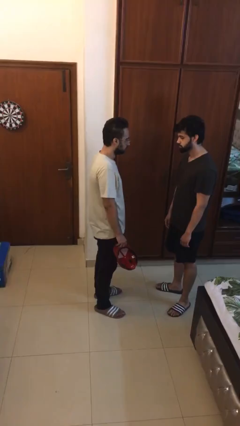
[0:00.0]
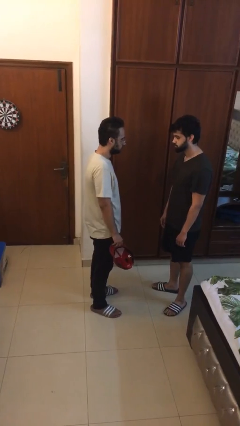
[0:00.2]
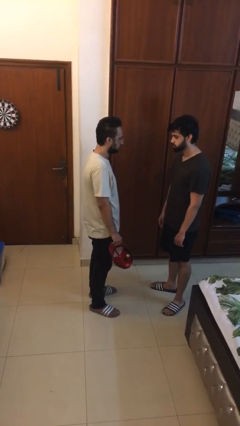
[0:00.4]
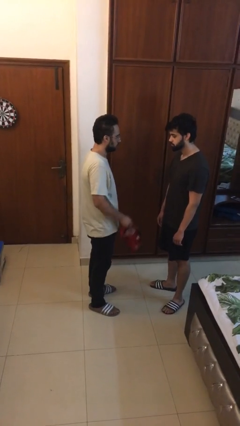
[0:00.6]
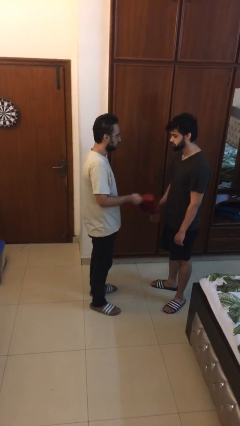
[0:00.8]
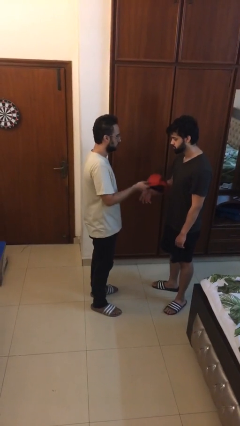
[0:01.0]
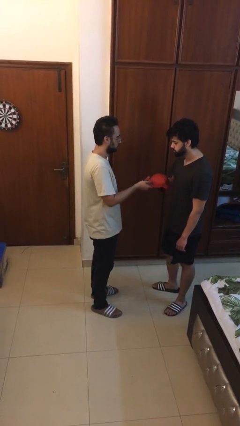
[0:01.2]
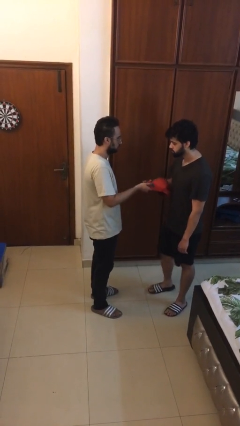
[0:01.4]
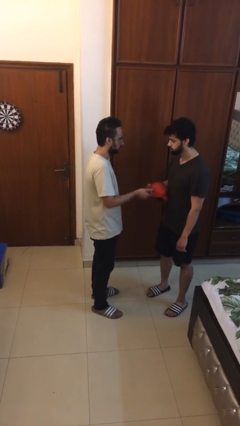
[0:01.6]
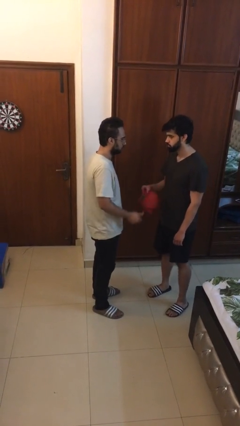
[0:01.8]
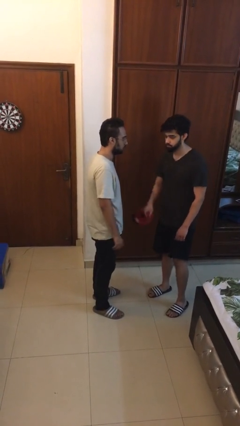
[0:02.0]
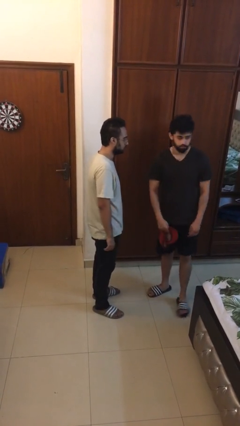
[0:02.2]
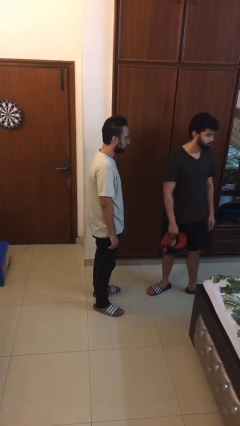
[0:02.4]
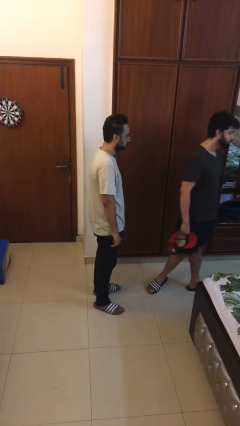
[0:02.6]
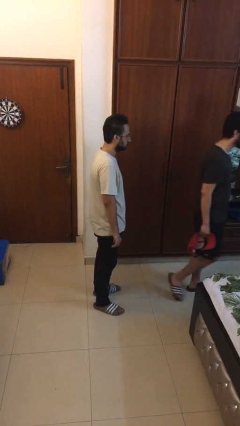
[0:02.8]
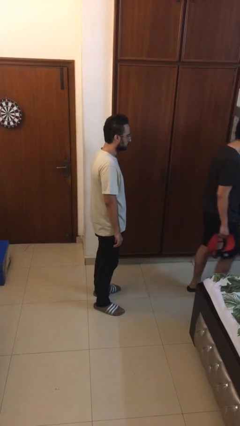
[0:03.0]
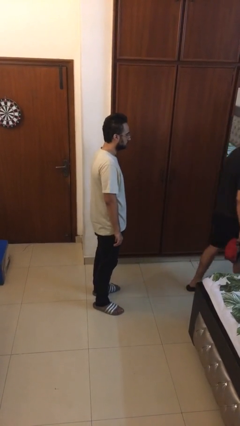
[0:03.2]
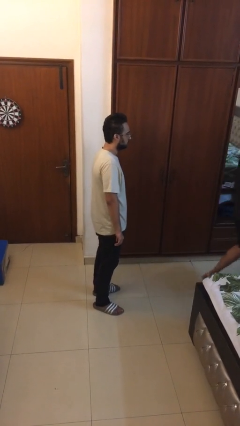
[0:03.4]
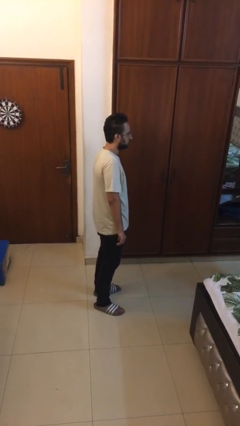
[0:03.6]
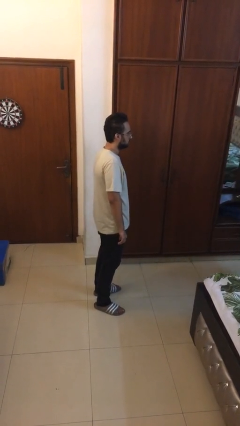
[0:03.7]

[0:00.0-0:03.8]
person transfers object to person

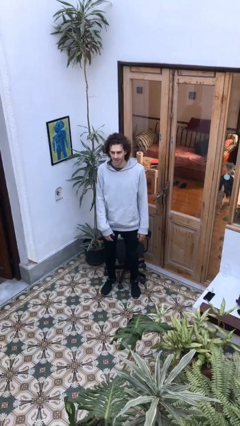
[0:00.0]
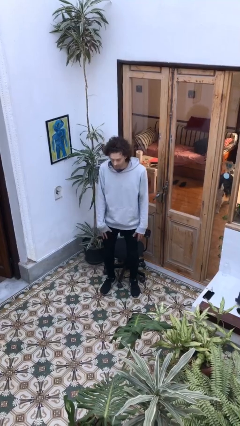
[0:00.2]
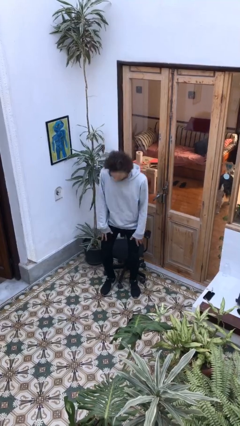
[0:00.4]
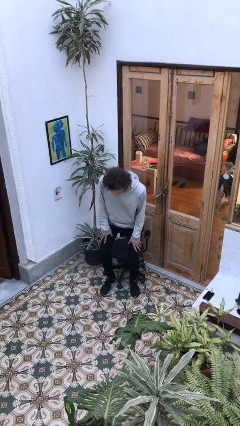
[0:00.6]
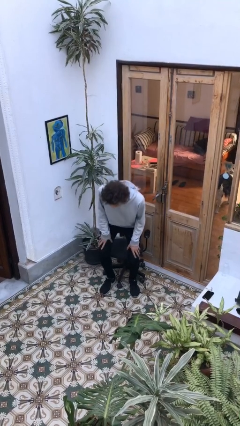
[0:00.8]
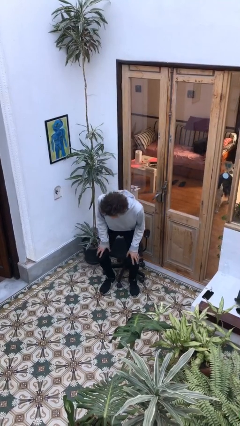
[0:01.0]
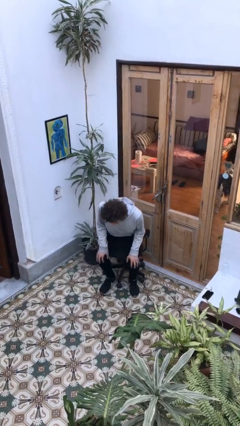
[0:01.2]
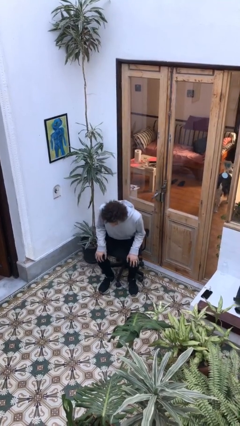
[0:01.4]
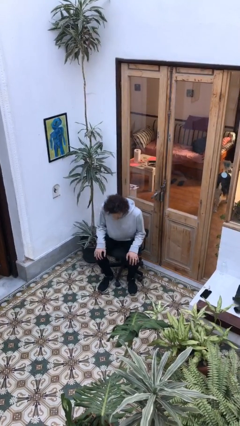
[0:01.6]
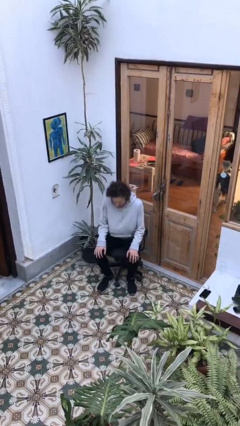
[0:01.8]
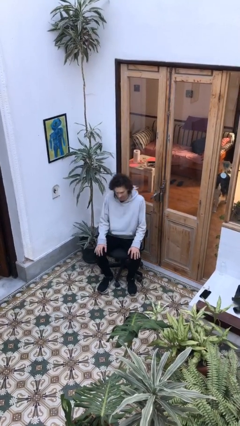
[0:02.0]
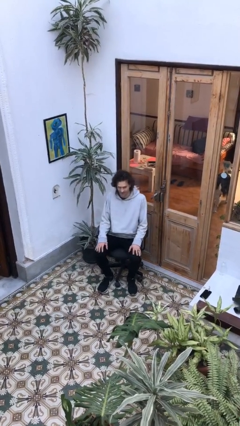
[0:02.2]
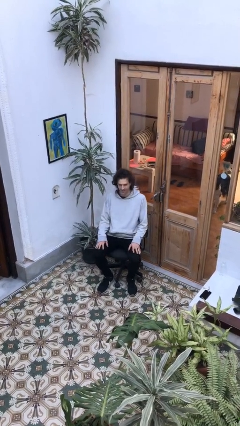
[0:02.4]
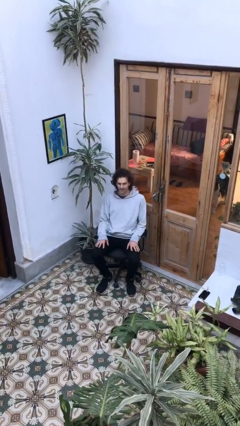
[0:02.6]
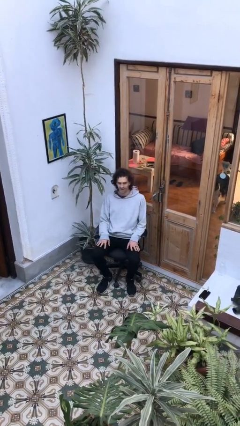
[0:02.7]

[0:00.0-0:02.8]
person sits down

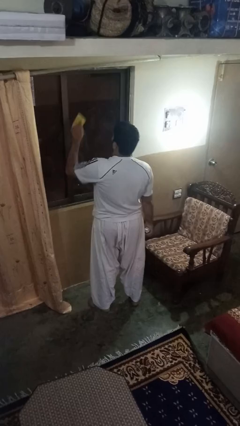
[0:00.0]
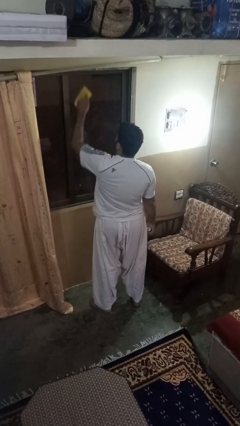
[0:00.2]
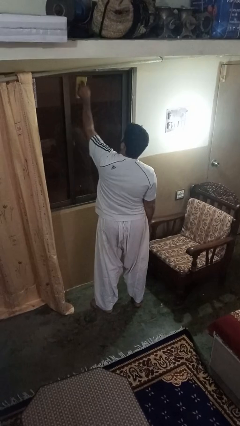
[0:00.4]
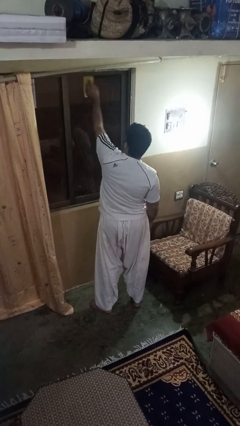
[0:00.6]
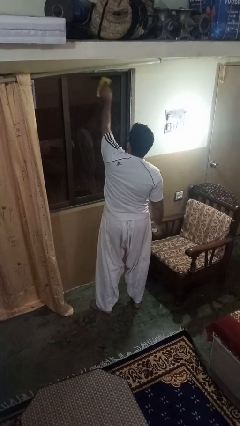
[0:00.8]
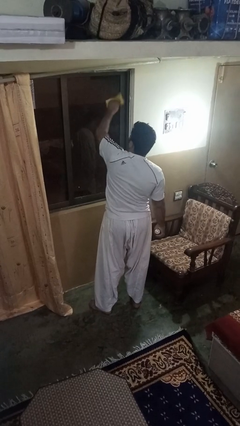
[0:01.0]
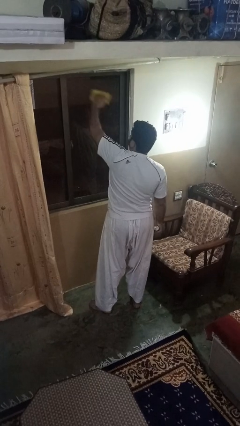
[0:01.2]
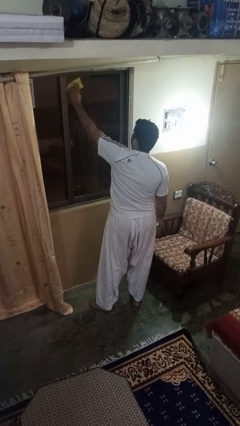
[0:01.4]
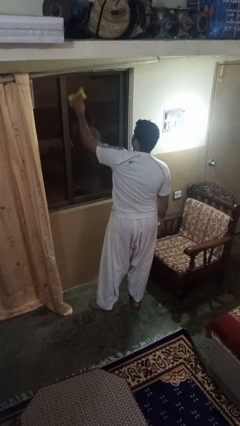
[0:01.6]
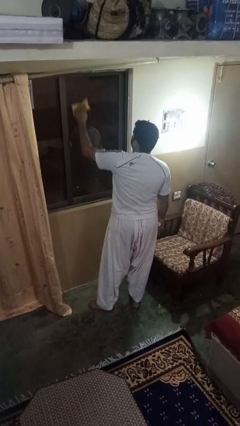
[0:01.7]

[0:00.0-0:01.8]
person washes window

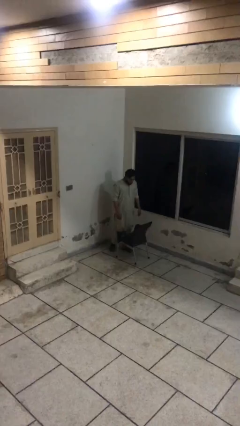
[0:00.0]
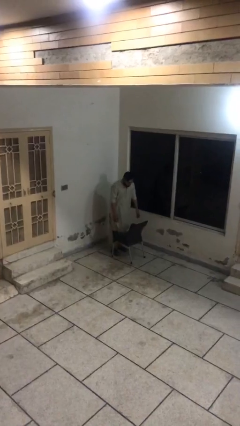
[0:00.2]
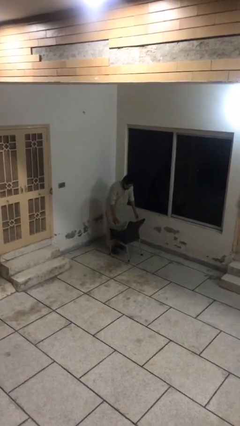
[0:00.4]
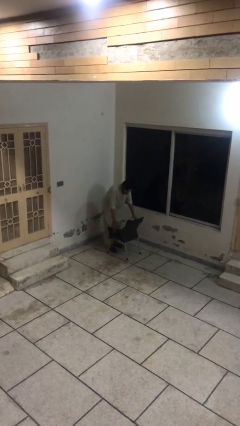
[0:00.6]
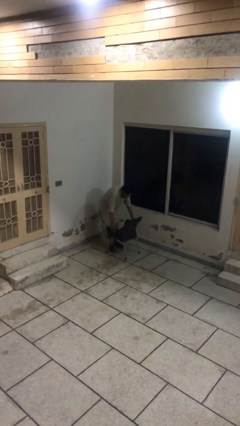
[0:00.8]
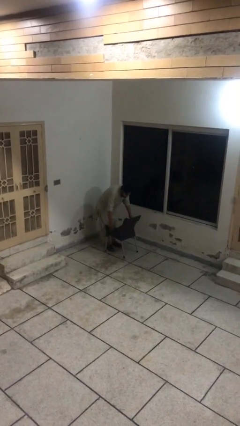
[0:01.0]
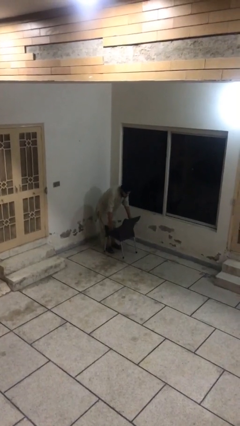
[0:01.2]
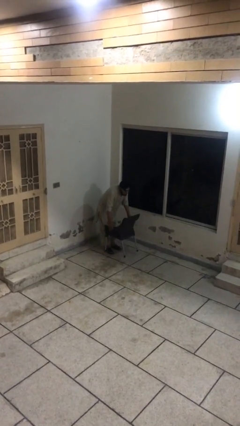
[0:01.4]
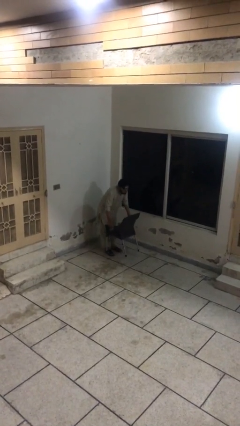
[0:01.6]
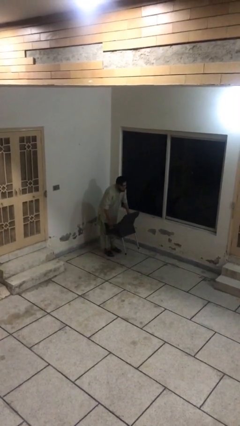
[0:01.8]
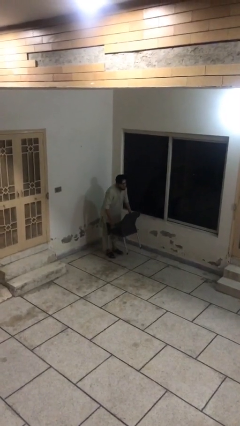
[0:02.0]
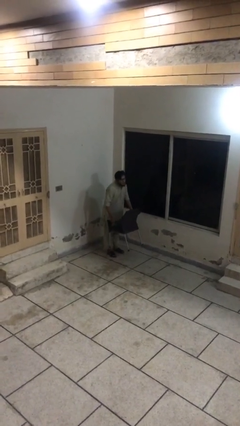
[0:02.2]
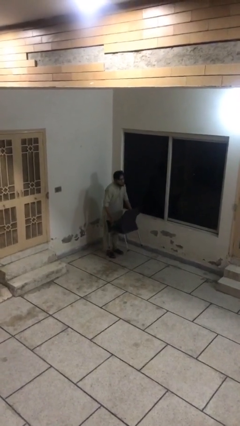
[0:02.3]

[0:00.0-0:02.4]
person picks up object from floor

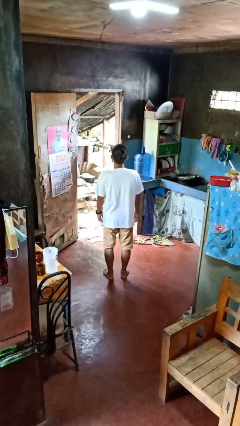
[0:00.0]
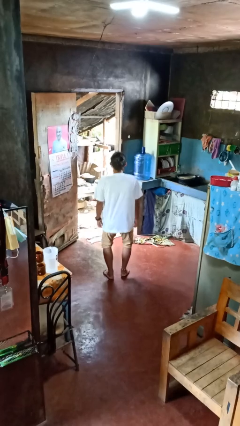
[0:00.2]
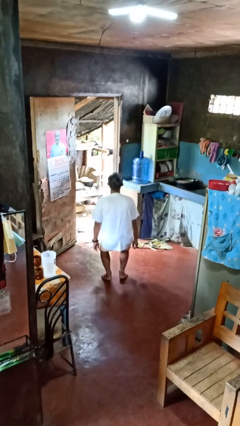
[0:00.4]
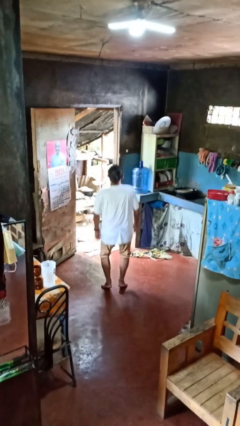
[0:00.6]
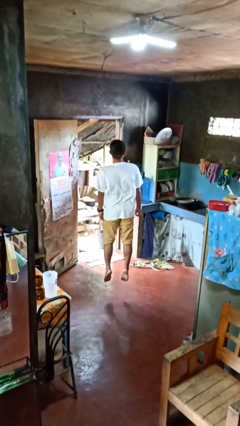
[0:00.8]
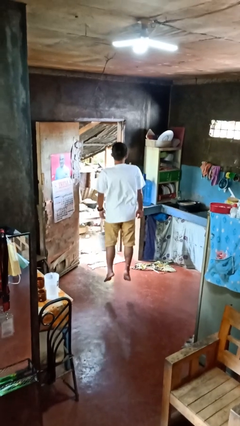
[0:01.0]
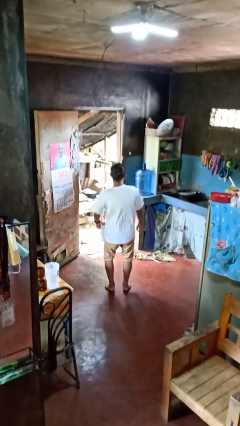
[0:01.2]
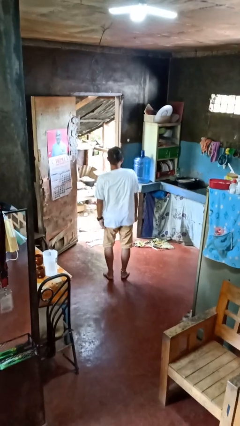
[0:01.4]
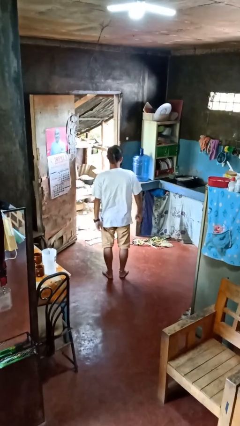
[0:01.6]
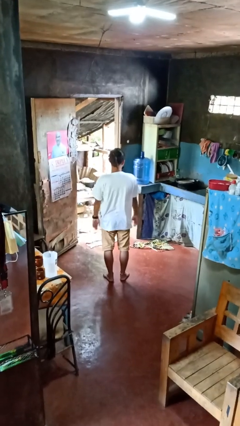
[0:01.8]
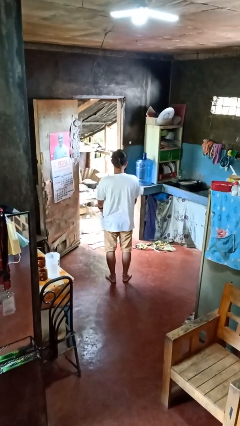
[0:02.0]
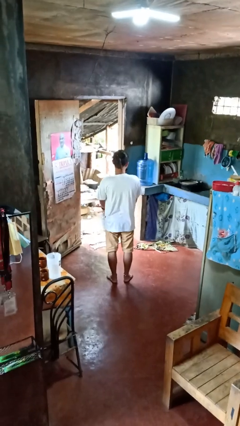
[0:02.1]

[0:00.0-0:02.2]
person jumps

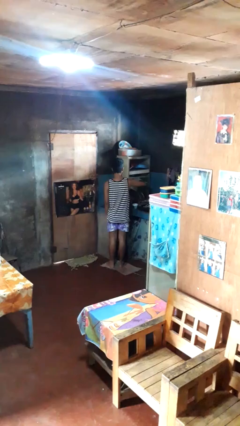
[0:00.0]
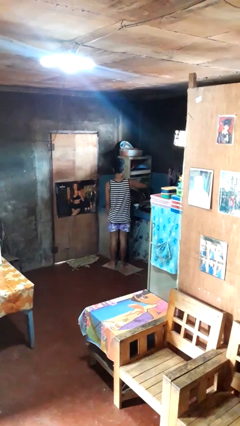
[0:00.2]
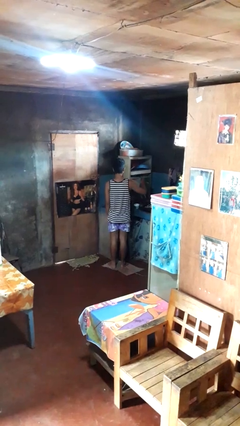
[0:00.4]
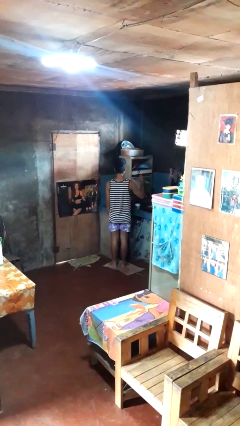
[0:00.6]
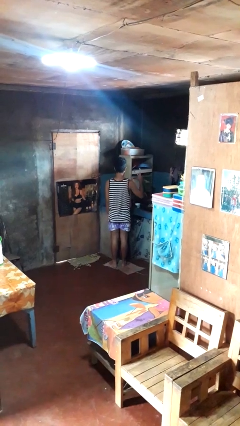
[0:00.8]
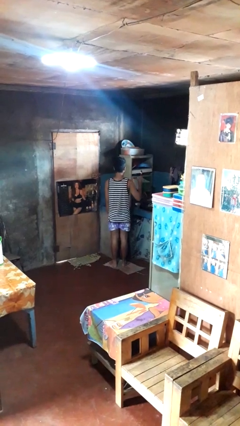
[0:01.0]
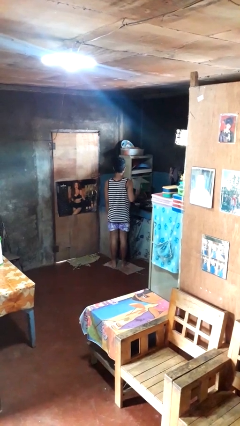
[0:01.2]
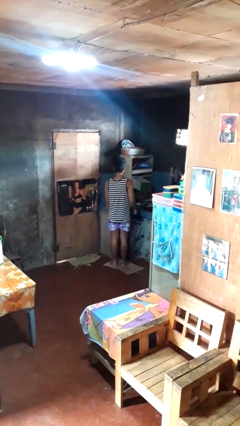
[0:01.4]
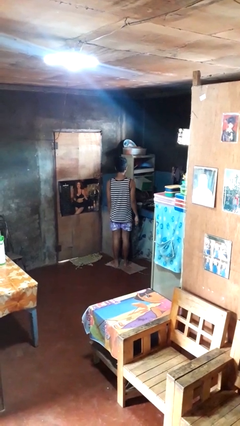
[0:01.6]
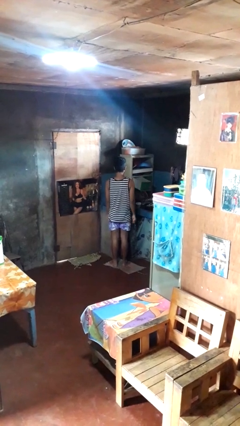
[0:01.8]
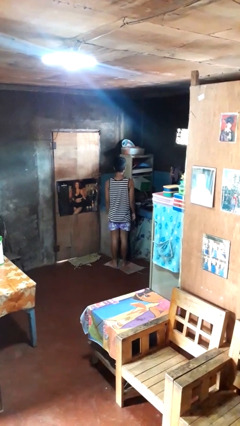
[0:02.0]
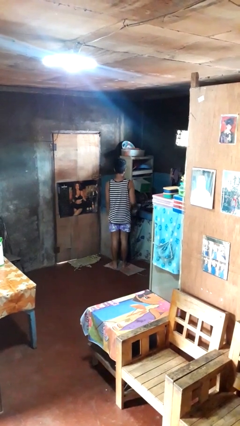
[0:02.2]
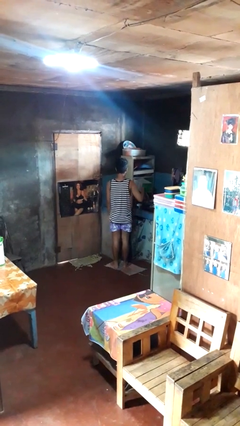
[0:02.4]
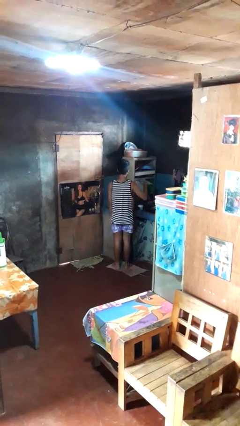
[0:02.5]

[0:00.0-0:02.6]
person takes object from kitchen drawer

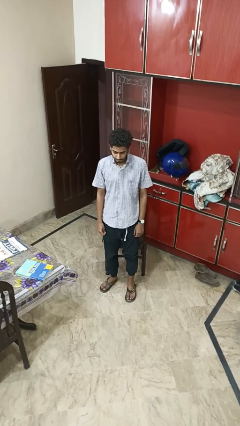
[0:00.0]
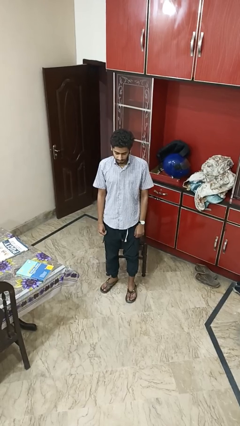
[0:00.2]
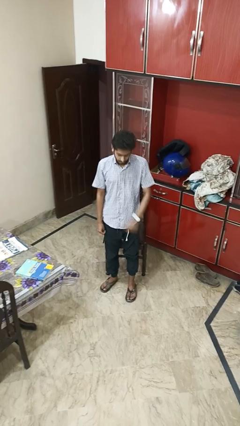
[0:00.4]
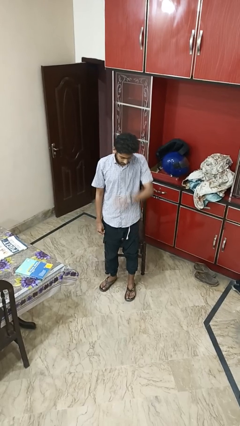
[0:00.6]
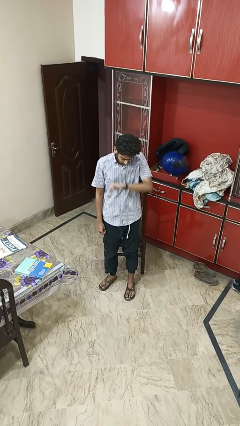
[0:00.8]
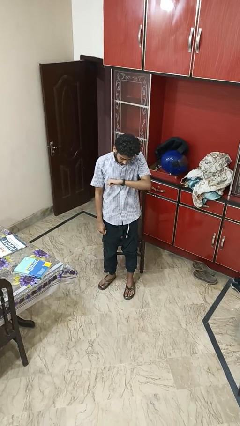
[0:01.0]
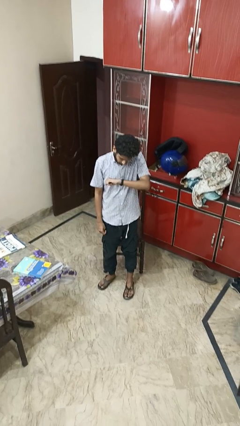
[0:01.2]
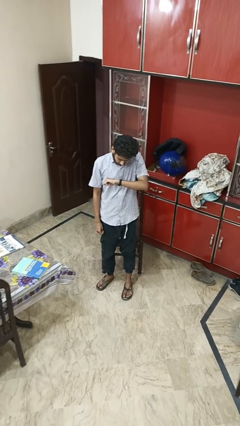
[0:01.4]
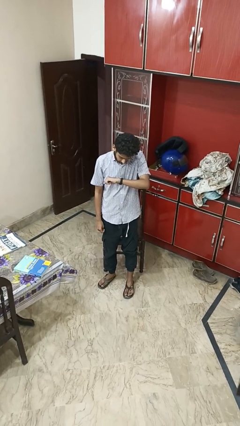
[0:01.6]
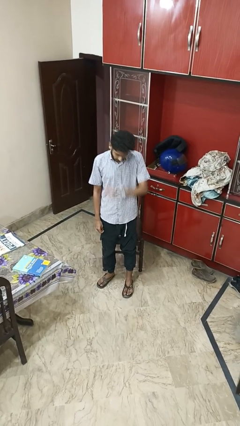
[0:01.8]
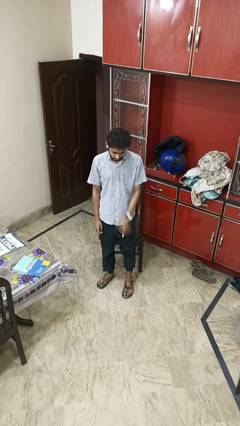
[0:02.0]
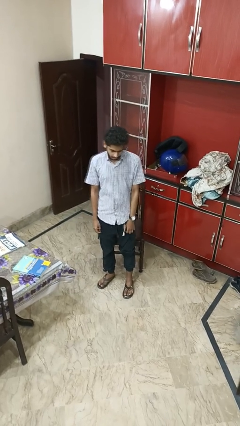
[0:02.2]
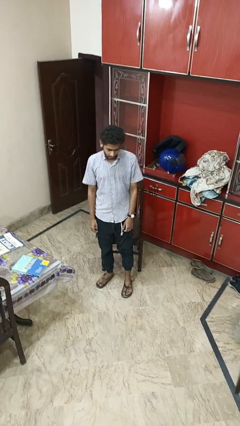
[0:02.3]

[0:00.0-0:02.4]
person looks at wristwatch
